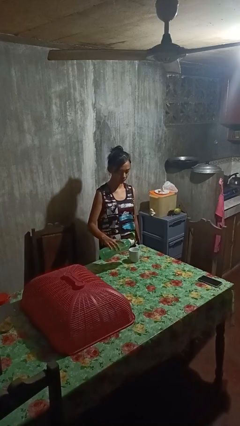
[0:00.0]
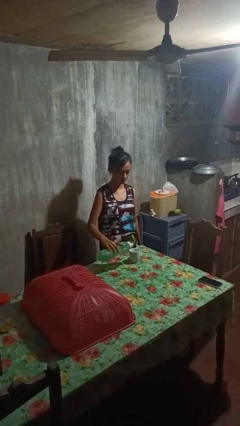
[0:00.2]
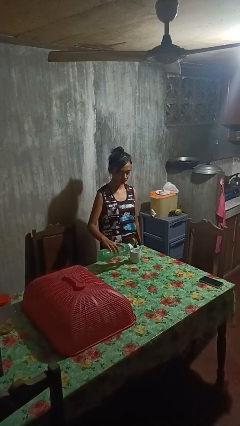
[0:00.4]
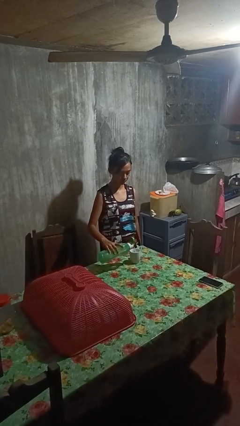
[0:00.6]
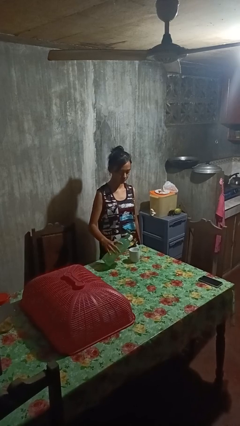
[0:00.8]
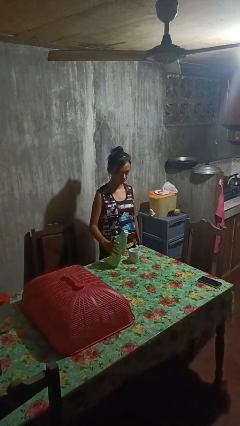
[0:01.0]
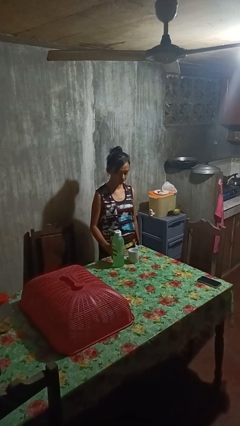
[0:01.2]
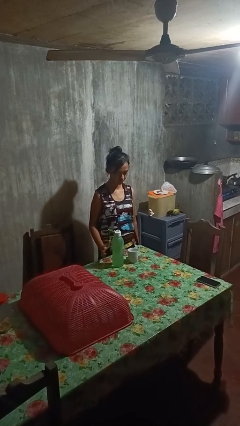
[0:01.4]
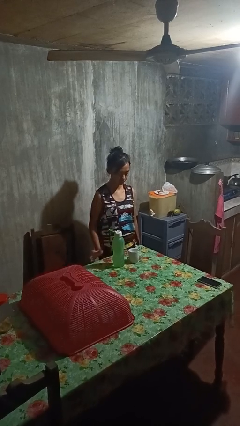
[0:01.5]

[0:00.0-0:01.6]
person pours liquid into cup

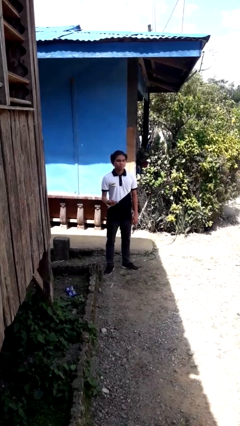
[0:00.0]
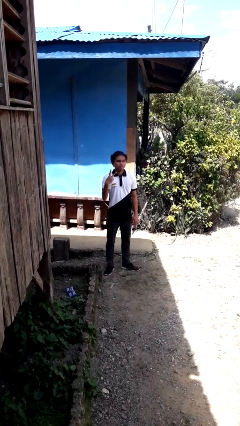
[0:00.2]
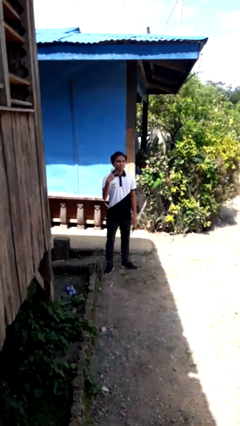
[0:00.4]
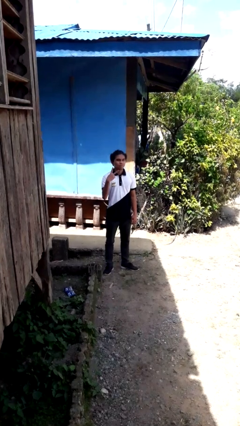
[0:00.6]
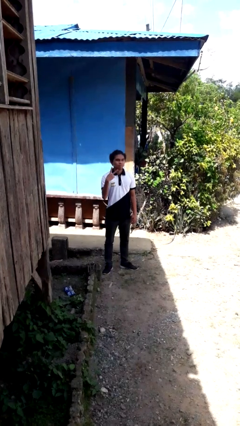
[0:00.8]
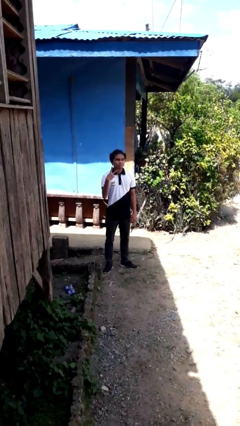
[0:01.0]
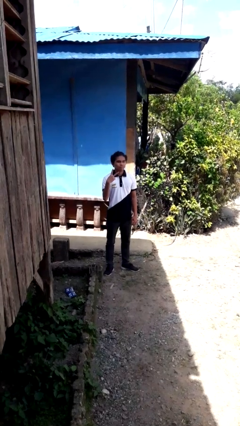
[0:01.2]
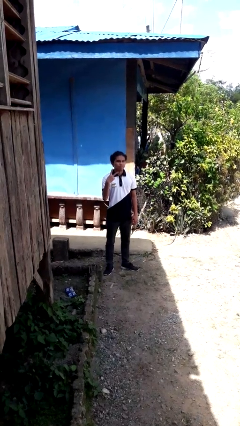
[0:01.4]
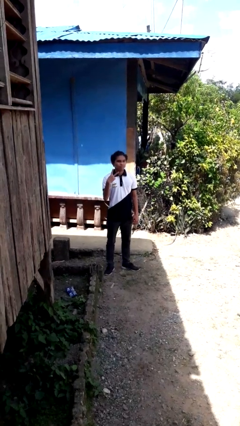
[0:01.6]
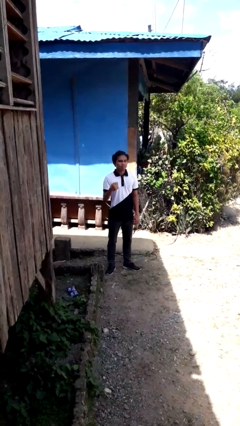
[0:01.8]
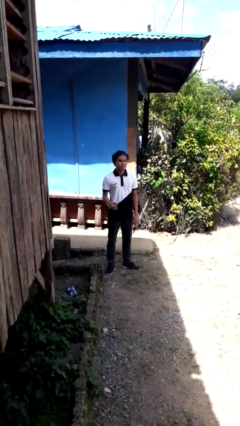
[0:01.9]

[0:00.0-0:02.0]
person gestures peace

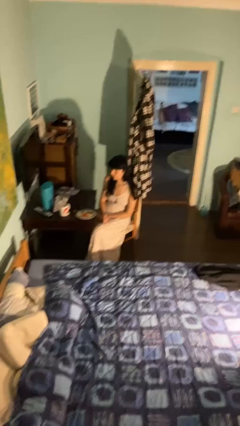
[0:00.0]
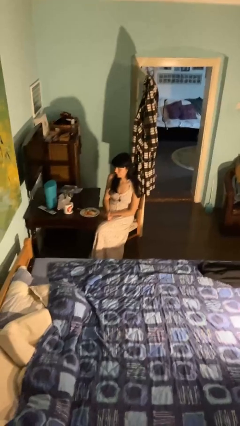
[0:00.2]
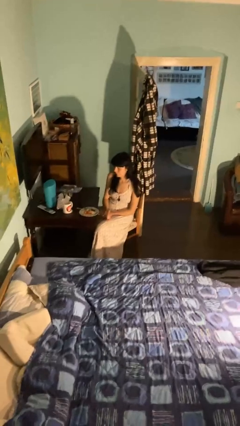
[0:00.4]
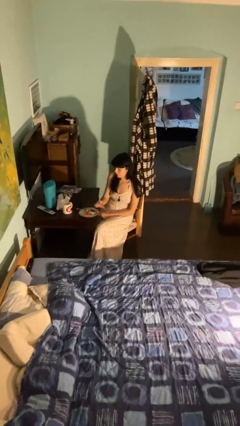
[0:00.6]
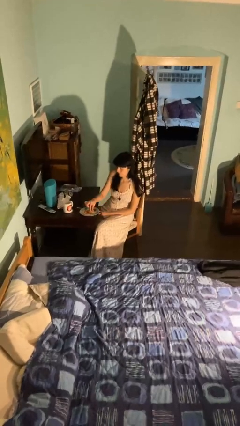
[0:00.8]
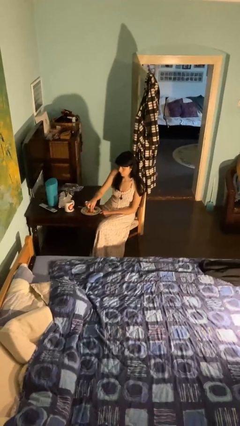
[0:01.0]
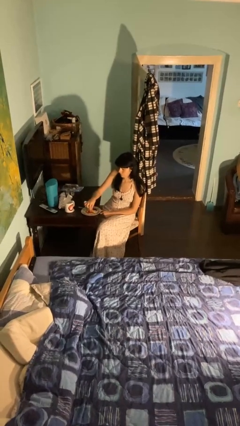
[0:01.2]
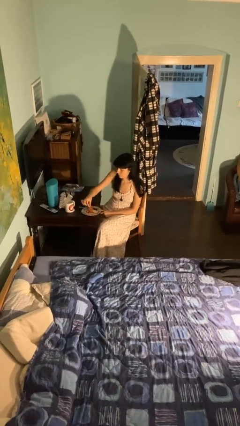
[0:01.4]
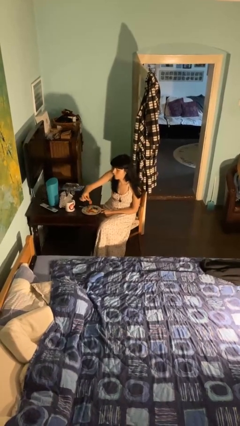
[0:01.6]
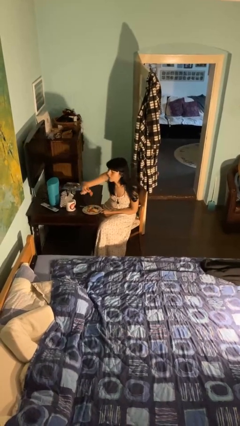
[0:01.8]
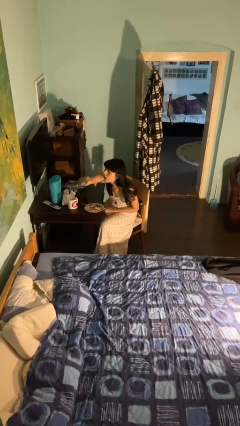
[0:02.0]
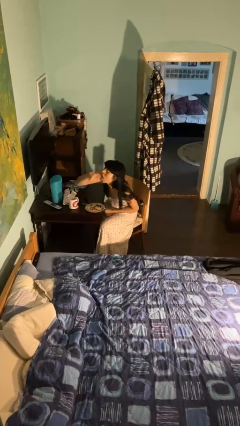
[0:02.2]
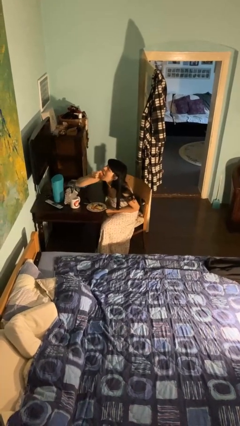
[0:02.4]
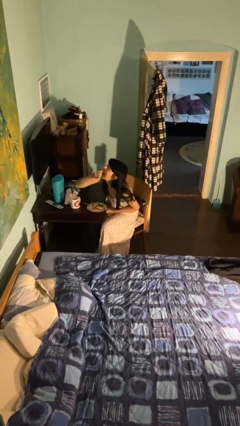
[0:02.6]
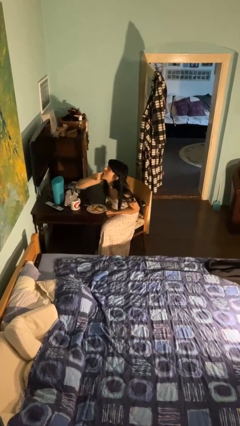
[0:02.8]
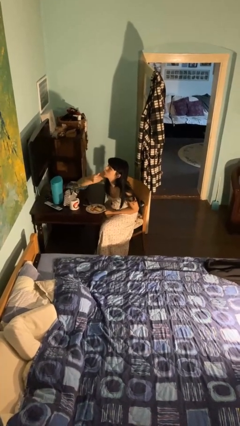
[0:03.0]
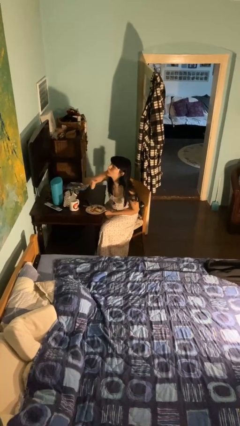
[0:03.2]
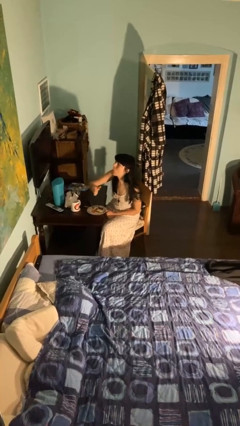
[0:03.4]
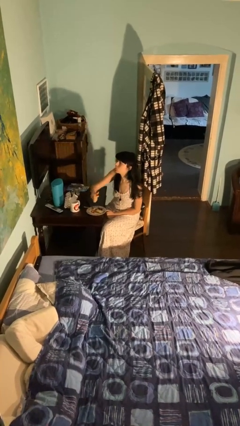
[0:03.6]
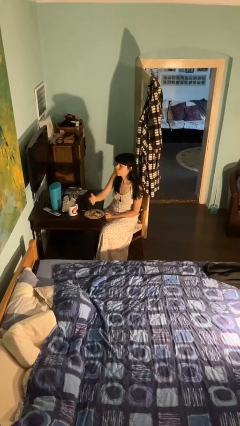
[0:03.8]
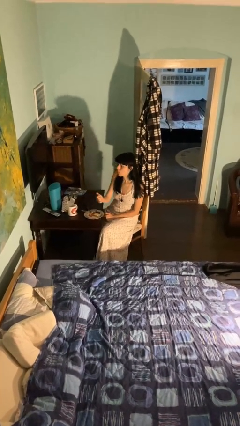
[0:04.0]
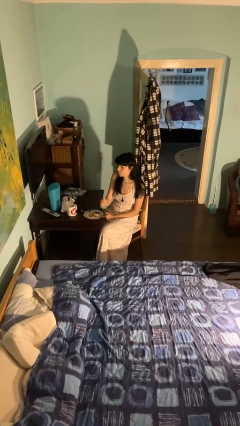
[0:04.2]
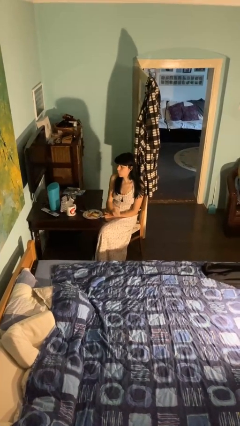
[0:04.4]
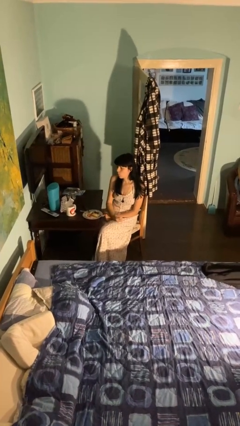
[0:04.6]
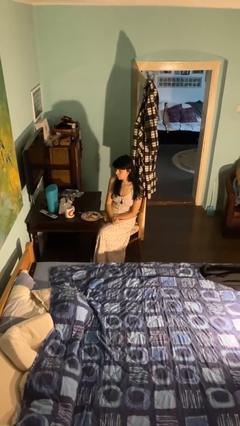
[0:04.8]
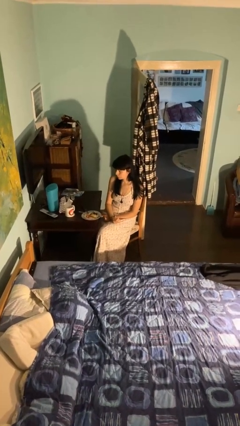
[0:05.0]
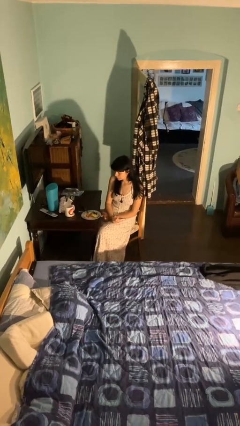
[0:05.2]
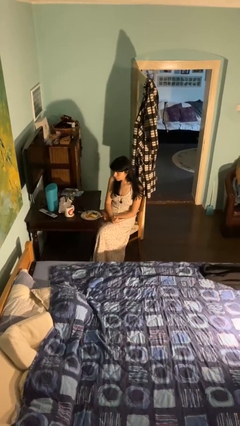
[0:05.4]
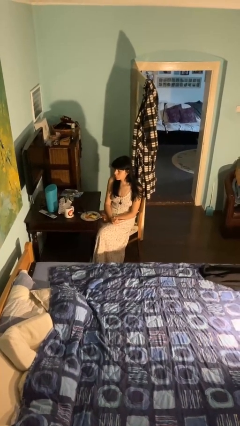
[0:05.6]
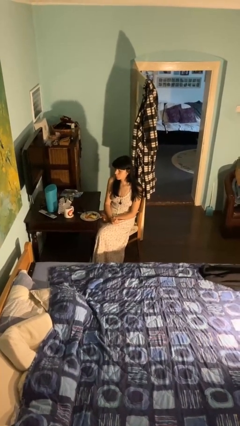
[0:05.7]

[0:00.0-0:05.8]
person eats with hands

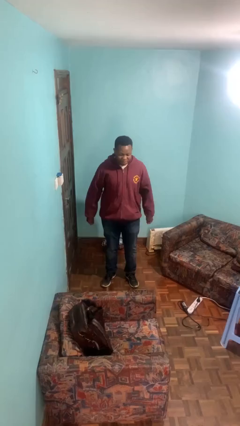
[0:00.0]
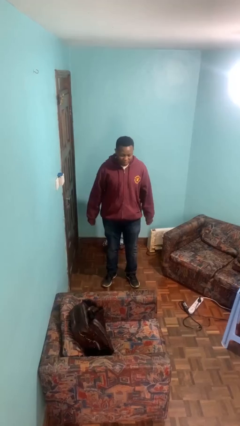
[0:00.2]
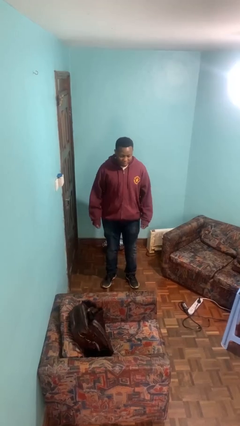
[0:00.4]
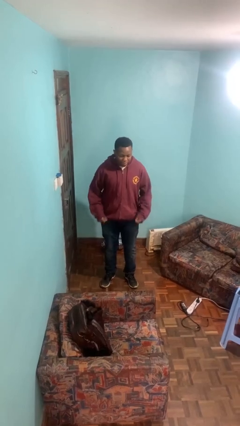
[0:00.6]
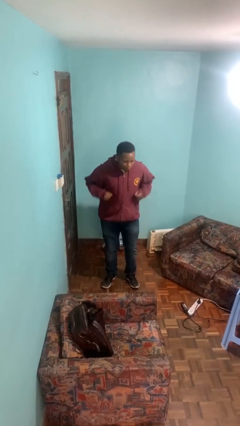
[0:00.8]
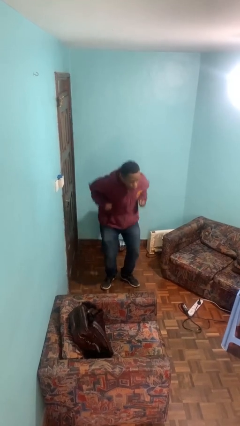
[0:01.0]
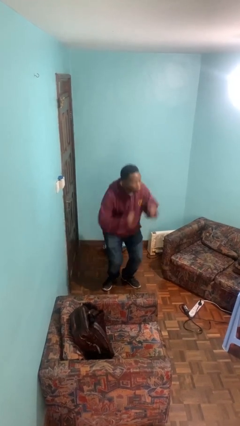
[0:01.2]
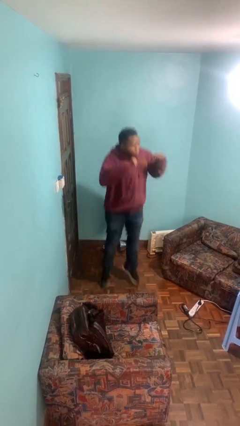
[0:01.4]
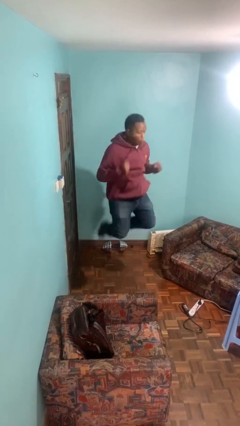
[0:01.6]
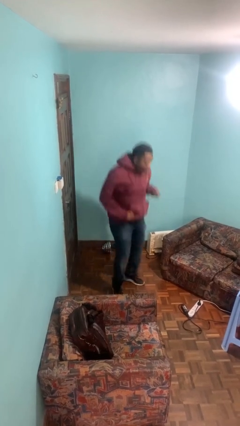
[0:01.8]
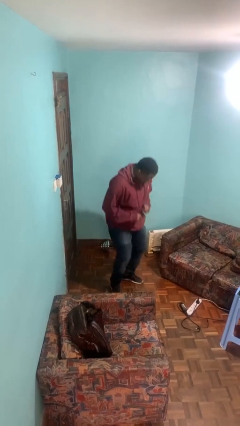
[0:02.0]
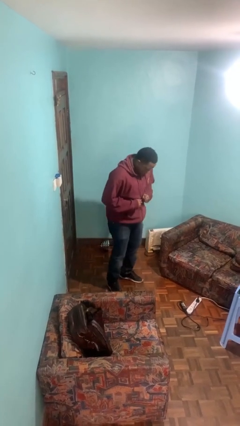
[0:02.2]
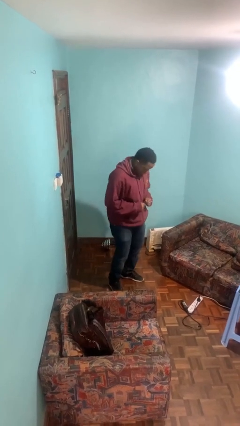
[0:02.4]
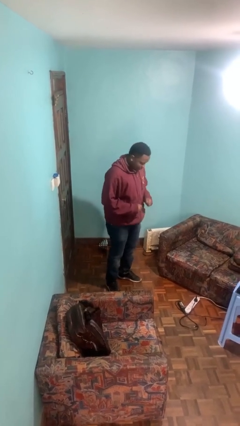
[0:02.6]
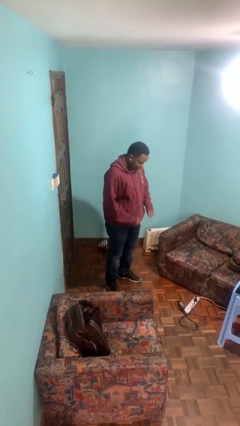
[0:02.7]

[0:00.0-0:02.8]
person jumps

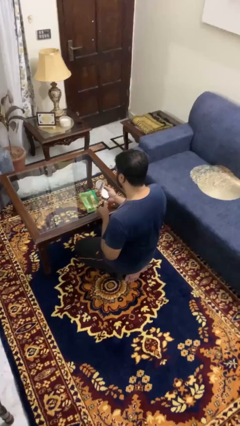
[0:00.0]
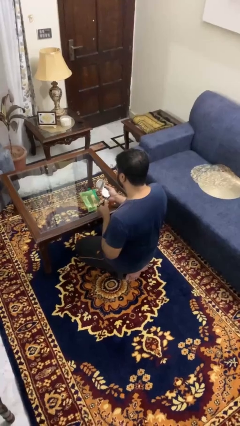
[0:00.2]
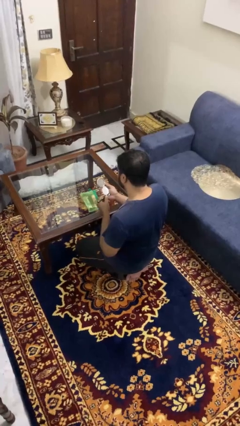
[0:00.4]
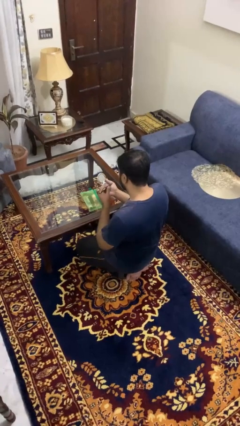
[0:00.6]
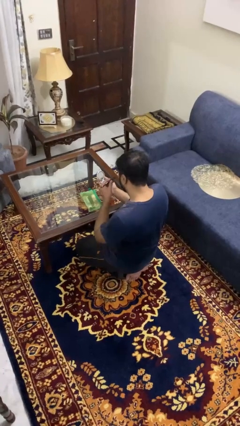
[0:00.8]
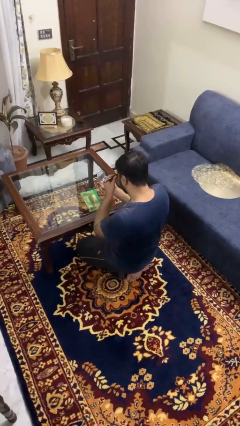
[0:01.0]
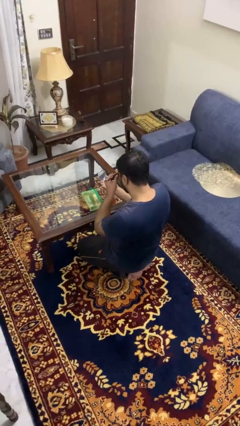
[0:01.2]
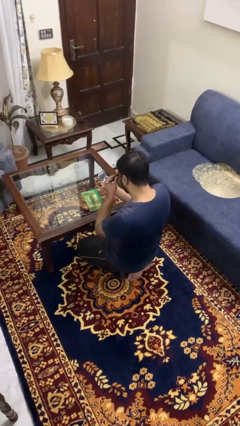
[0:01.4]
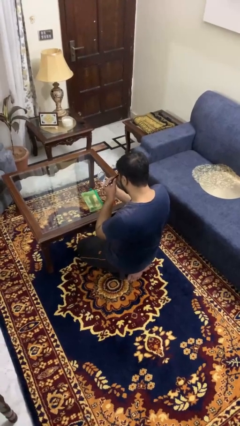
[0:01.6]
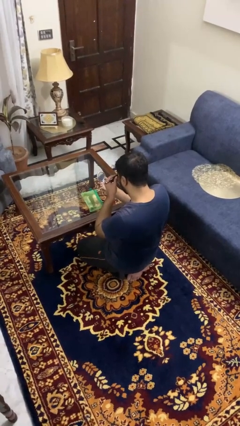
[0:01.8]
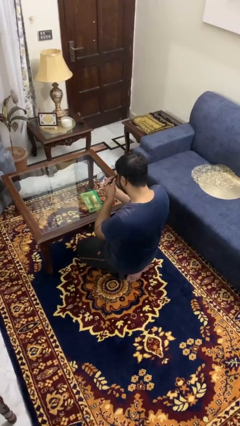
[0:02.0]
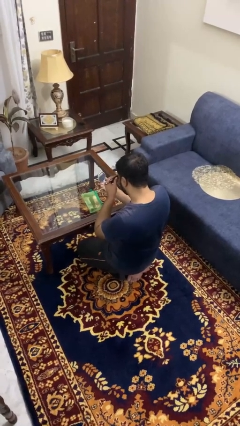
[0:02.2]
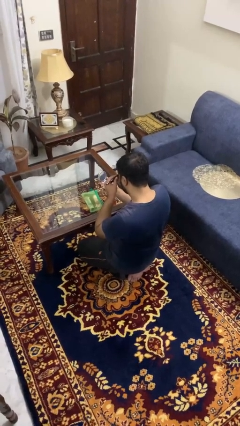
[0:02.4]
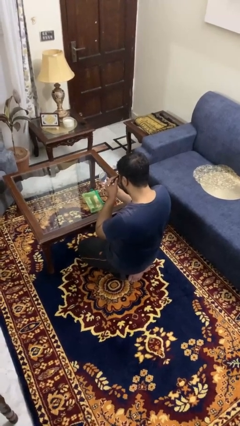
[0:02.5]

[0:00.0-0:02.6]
person applies eye makeup

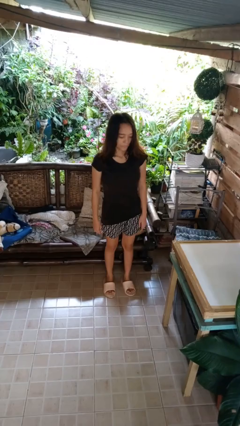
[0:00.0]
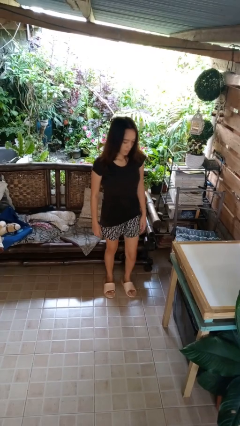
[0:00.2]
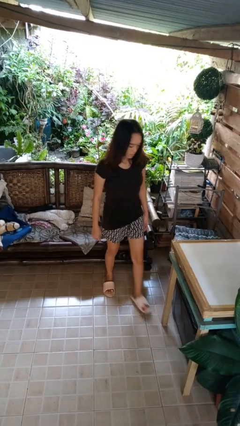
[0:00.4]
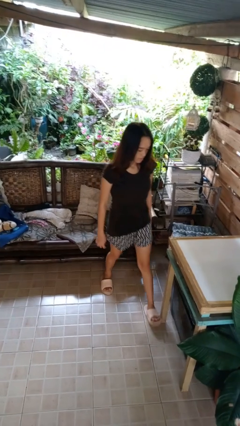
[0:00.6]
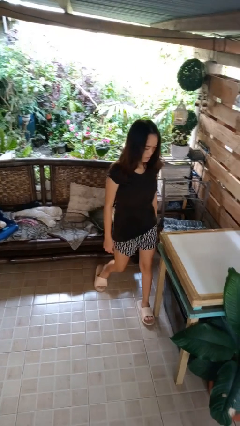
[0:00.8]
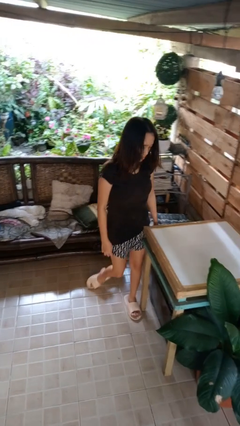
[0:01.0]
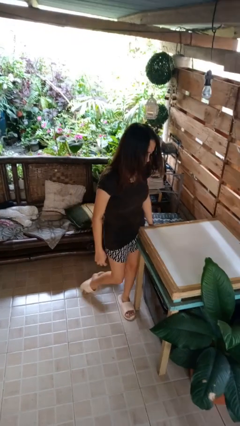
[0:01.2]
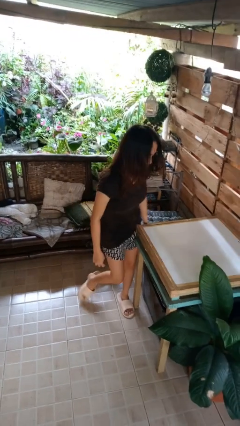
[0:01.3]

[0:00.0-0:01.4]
person bumps into table

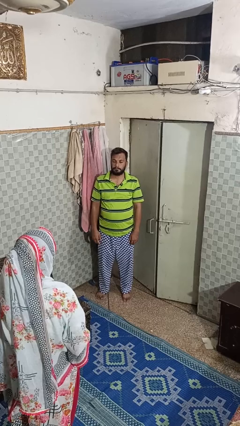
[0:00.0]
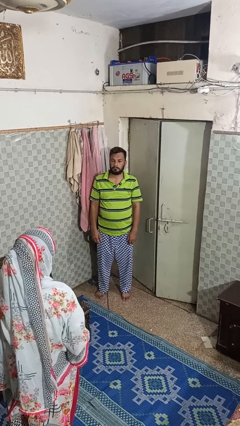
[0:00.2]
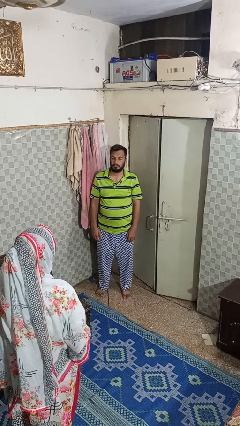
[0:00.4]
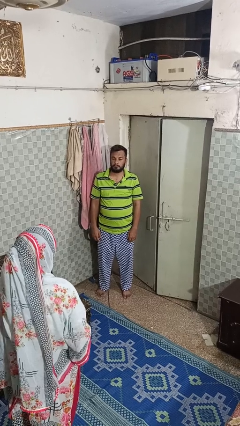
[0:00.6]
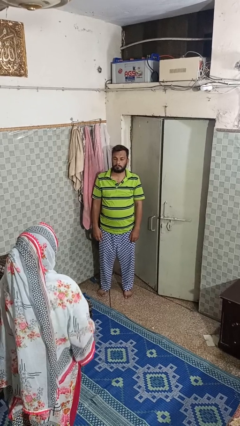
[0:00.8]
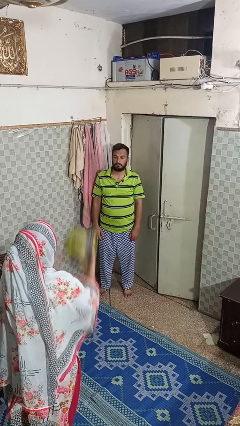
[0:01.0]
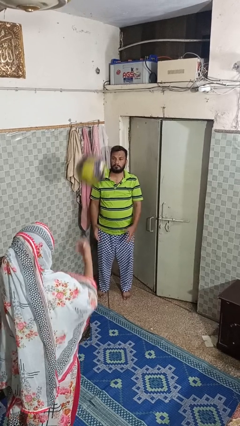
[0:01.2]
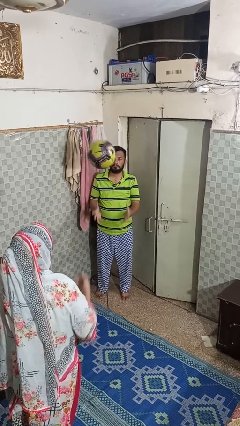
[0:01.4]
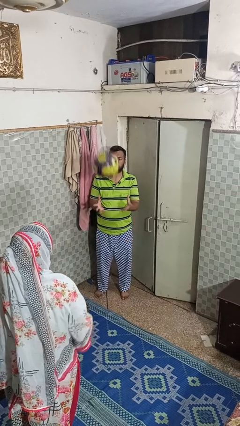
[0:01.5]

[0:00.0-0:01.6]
person catches object from person
